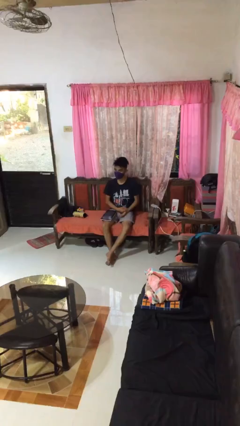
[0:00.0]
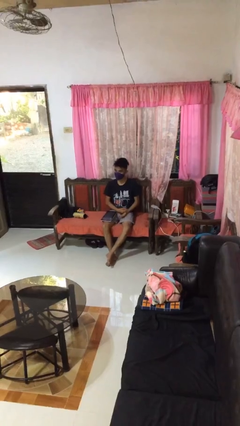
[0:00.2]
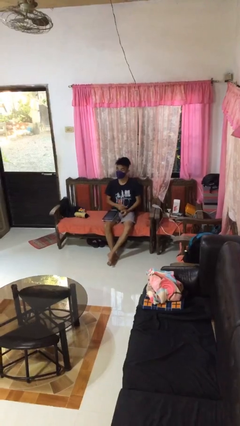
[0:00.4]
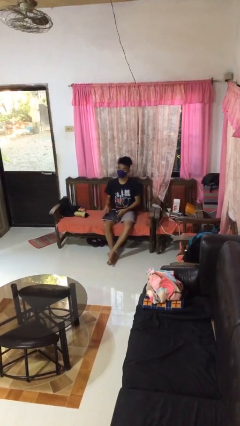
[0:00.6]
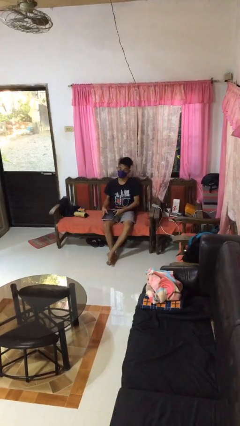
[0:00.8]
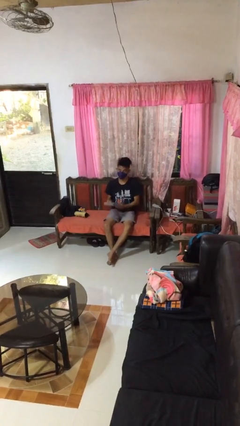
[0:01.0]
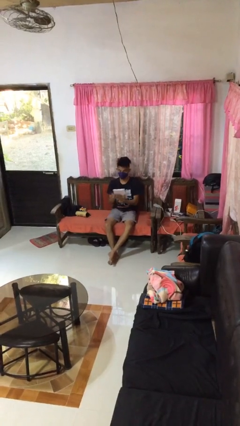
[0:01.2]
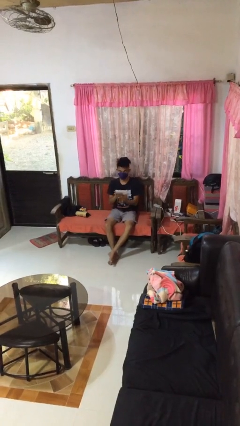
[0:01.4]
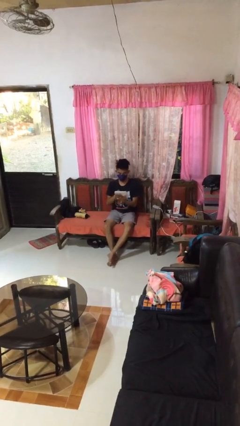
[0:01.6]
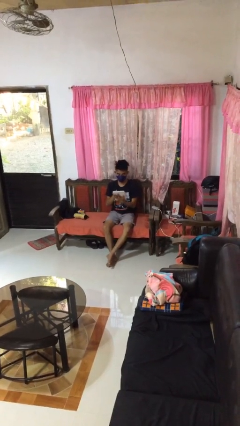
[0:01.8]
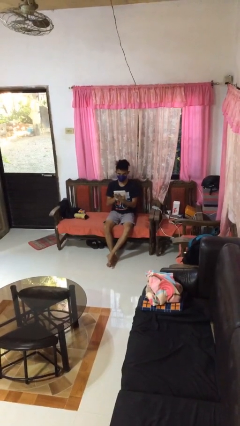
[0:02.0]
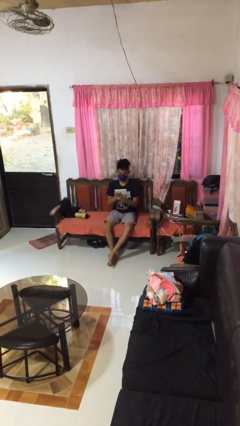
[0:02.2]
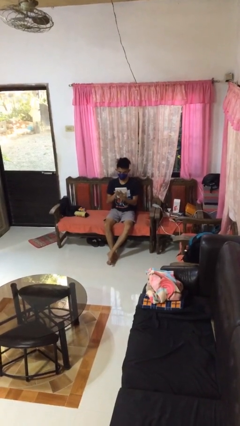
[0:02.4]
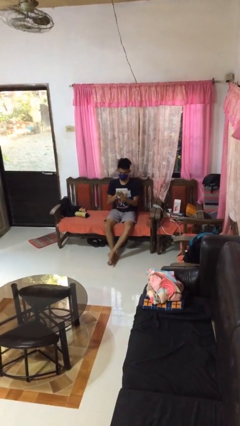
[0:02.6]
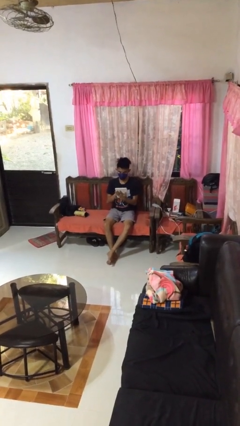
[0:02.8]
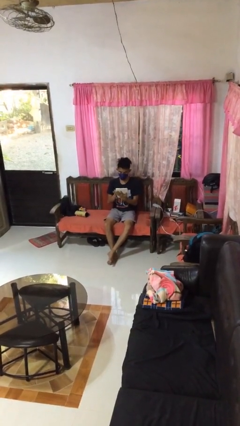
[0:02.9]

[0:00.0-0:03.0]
person interacts with tablet

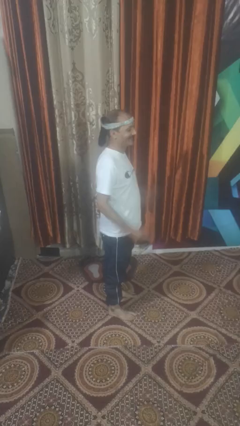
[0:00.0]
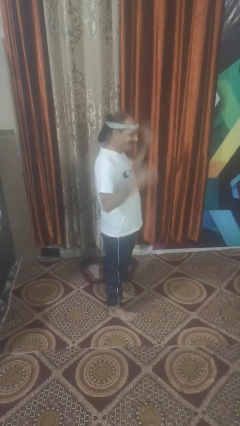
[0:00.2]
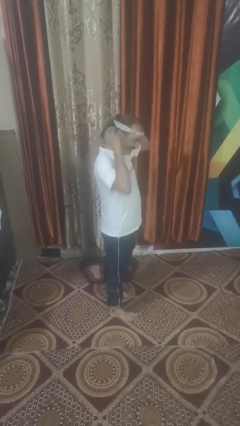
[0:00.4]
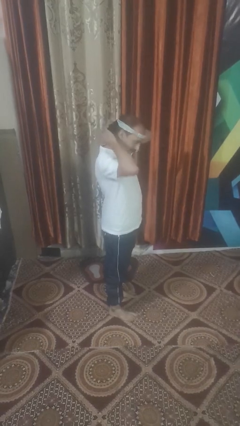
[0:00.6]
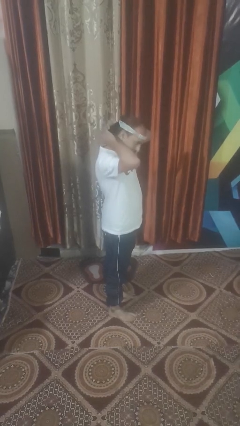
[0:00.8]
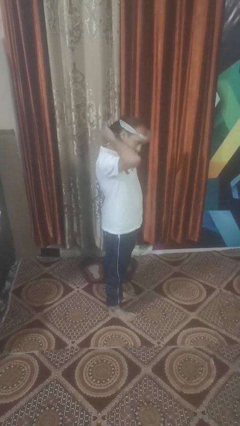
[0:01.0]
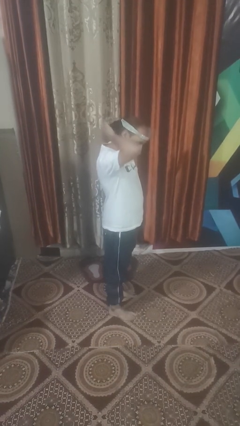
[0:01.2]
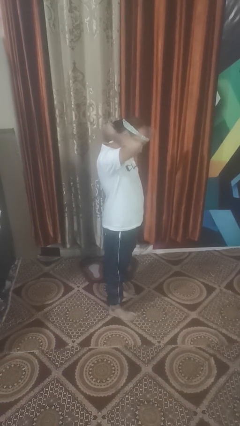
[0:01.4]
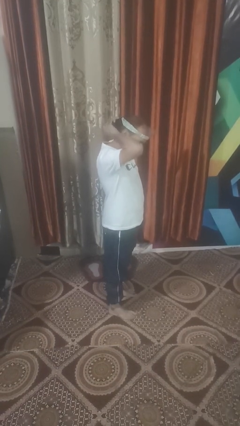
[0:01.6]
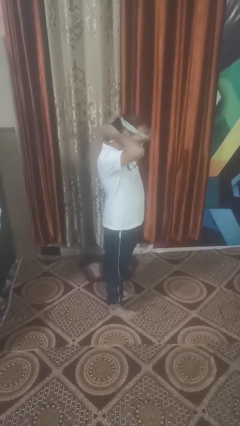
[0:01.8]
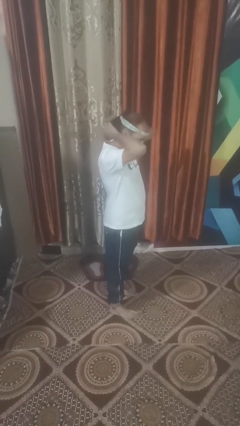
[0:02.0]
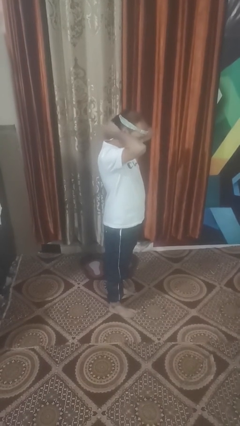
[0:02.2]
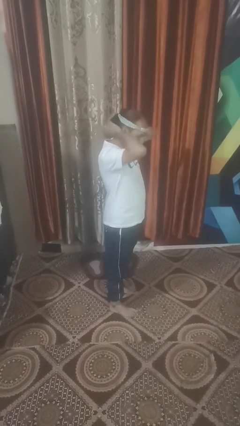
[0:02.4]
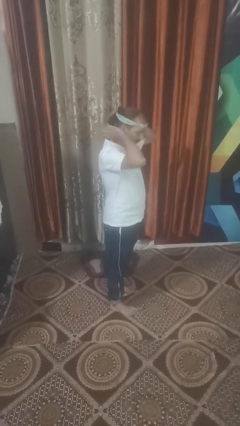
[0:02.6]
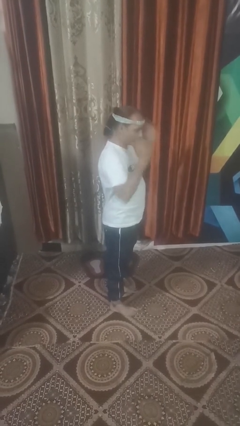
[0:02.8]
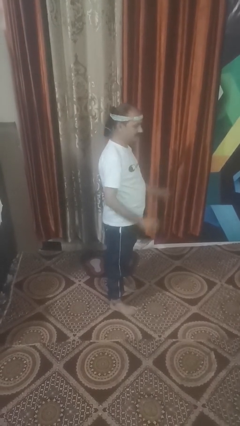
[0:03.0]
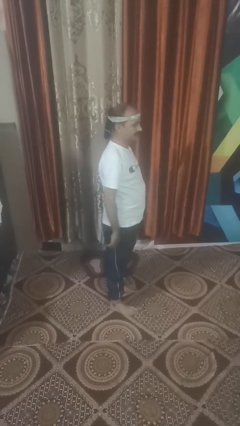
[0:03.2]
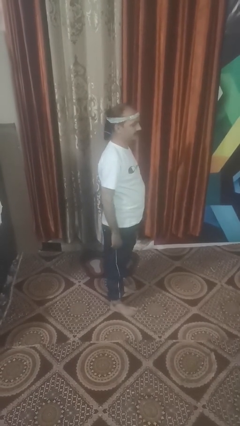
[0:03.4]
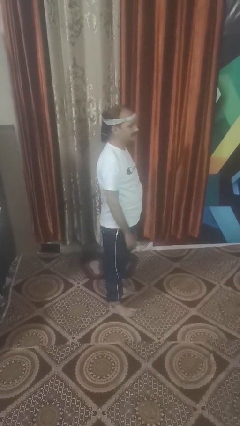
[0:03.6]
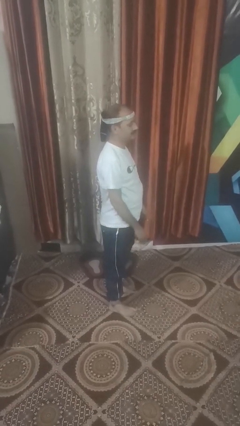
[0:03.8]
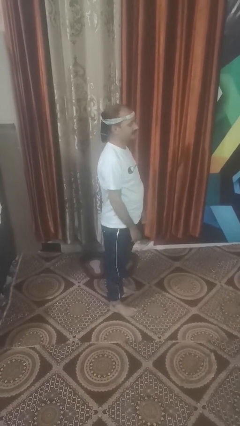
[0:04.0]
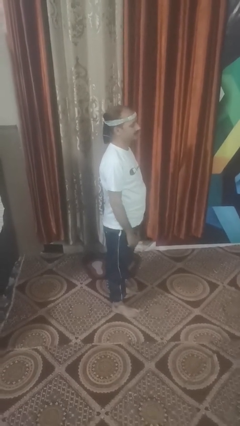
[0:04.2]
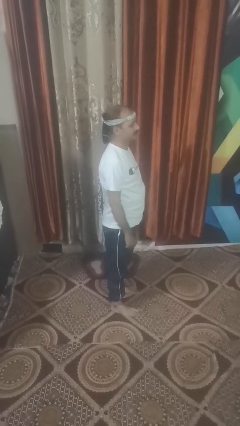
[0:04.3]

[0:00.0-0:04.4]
person puts hair in ponytail

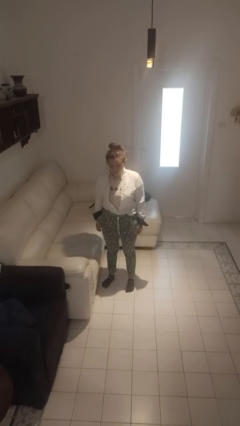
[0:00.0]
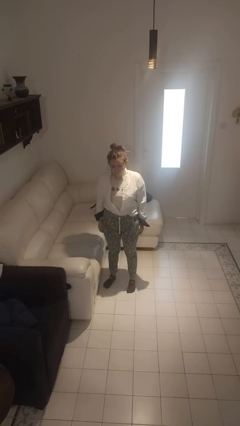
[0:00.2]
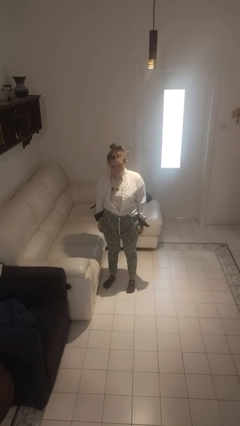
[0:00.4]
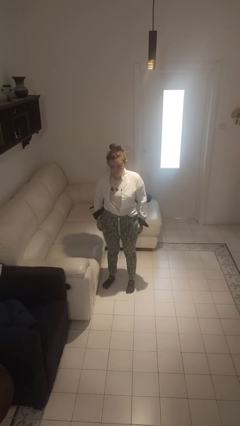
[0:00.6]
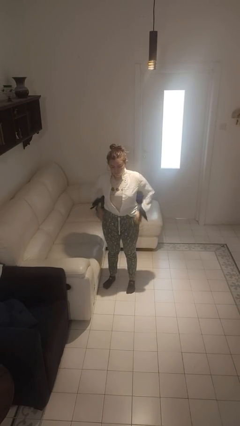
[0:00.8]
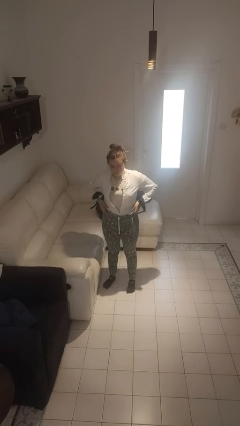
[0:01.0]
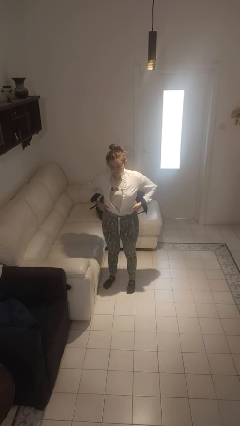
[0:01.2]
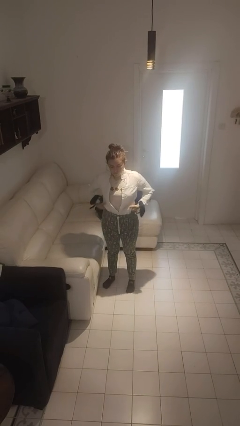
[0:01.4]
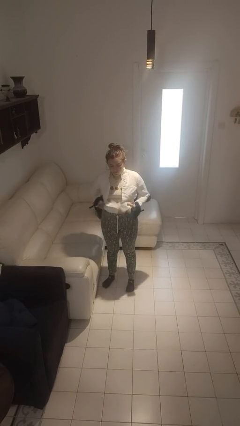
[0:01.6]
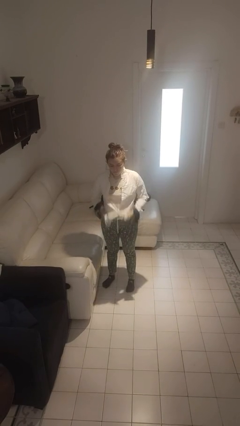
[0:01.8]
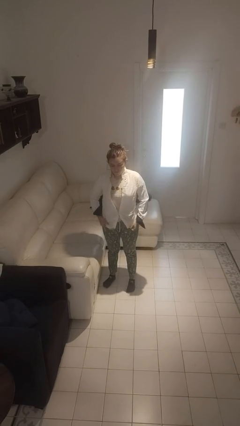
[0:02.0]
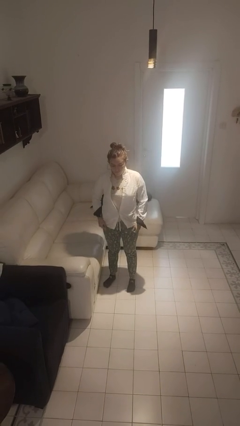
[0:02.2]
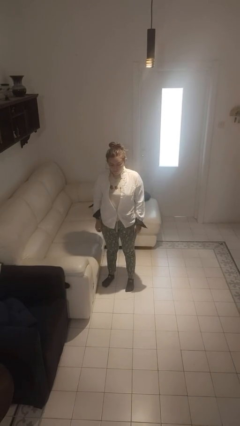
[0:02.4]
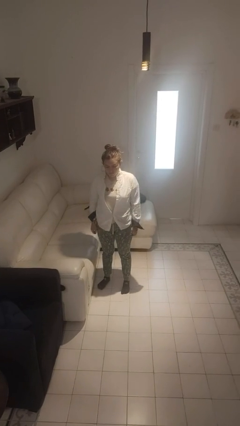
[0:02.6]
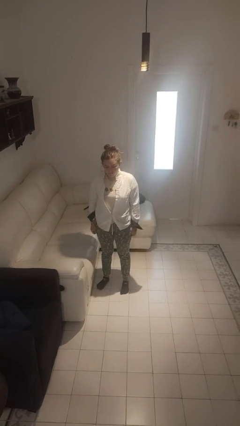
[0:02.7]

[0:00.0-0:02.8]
person untucks shirt

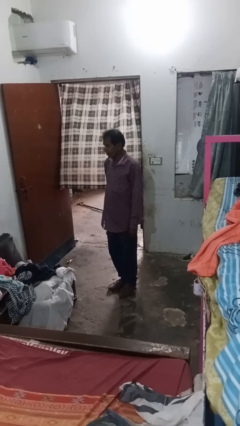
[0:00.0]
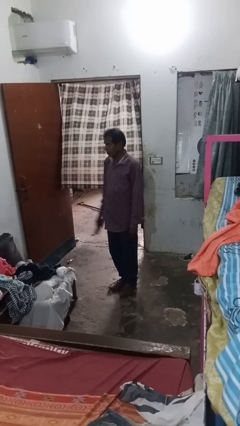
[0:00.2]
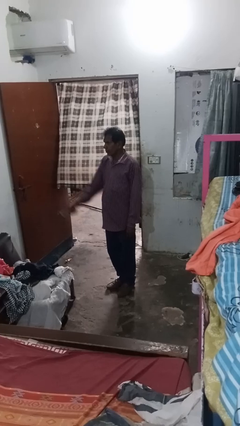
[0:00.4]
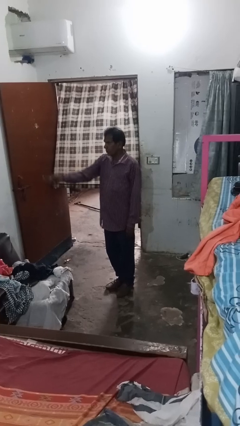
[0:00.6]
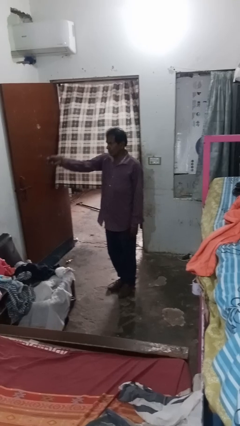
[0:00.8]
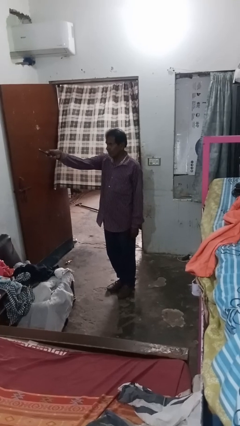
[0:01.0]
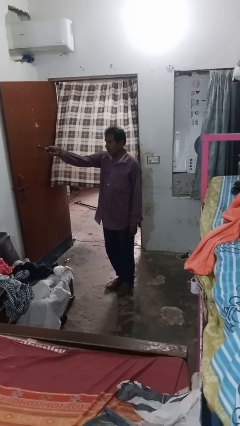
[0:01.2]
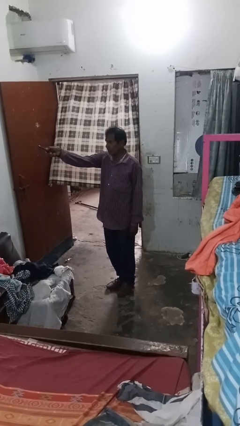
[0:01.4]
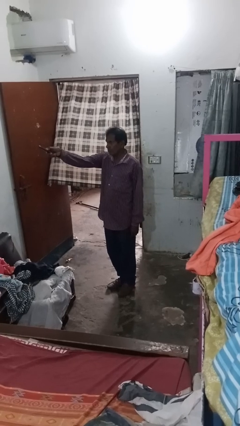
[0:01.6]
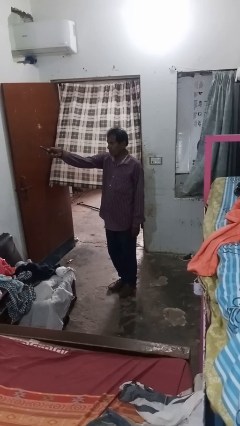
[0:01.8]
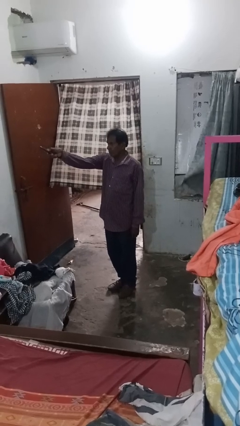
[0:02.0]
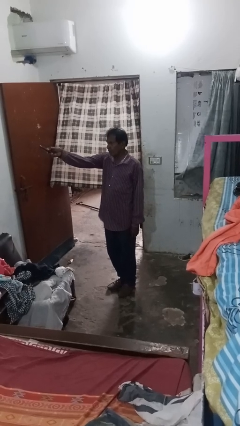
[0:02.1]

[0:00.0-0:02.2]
person uses television remote

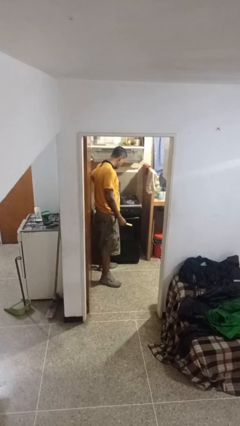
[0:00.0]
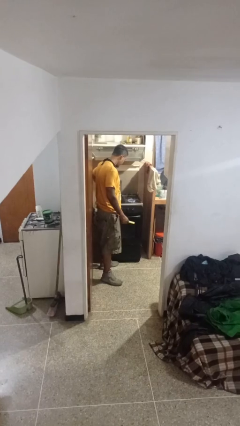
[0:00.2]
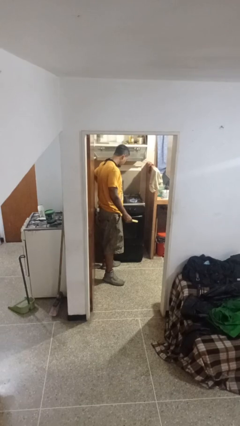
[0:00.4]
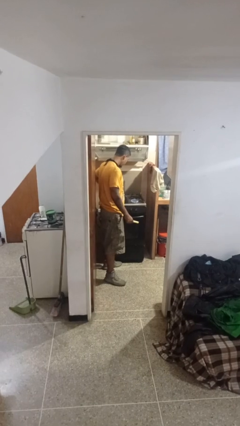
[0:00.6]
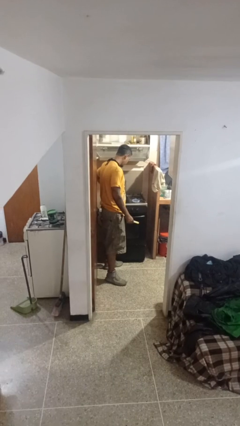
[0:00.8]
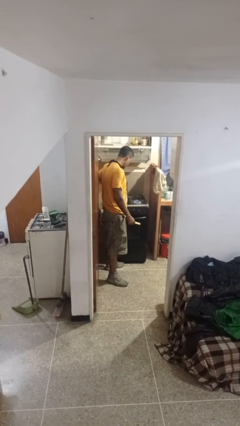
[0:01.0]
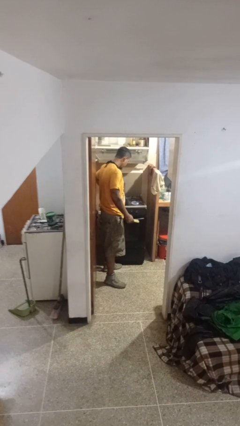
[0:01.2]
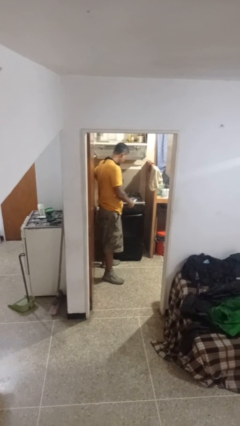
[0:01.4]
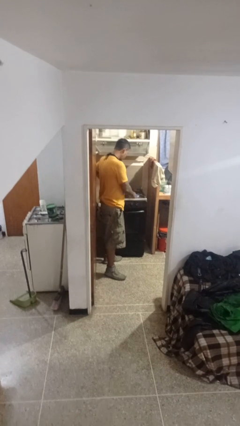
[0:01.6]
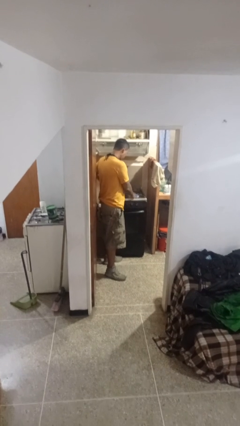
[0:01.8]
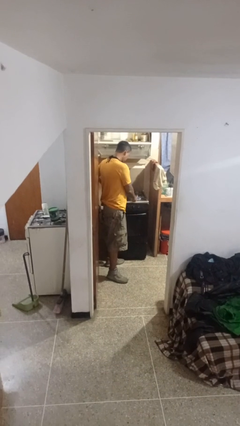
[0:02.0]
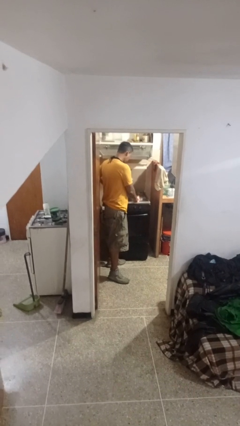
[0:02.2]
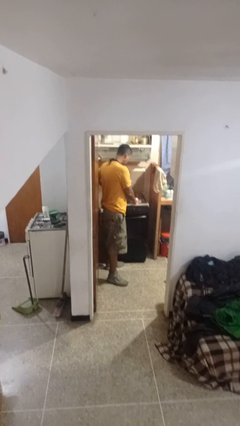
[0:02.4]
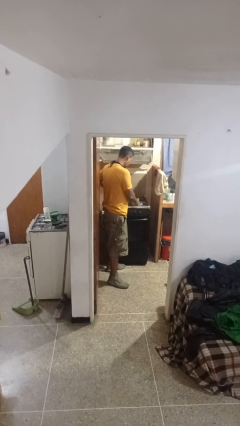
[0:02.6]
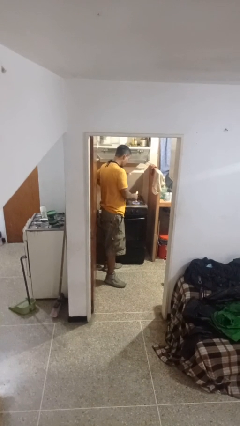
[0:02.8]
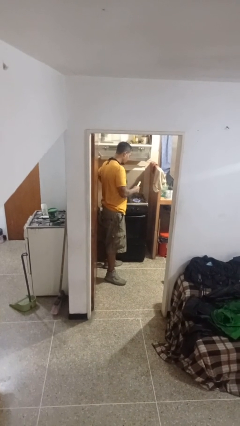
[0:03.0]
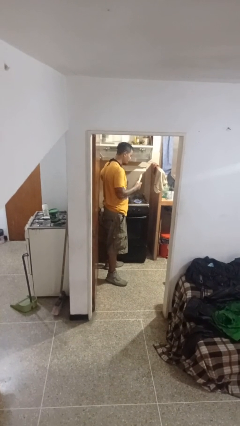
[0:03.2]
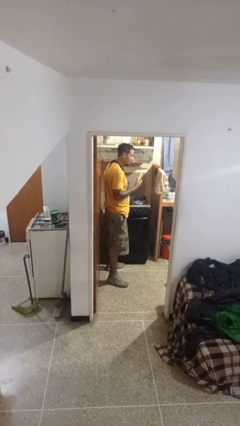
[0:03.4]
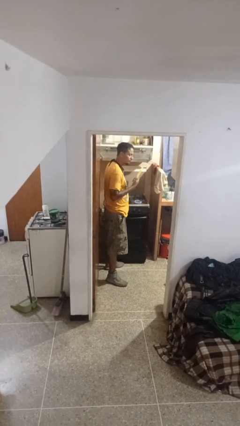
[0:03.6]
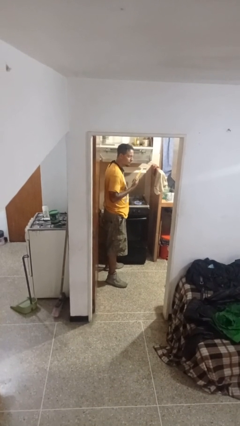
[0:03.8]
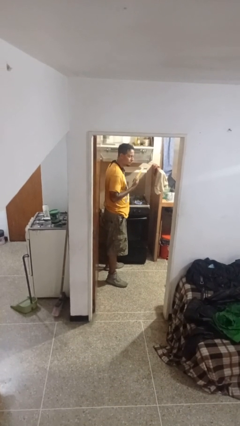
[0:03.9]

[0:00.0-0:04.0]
person lights candle

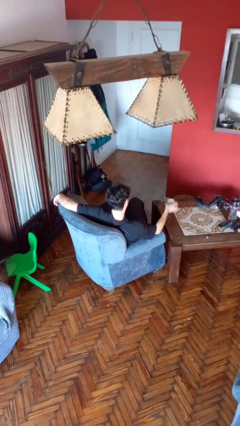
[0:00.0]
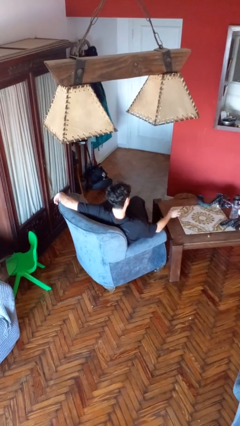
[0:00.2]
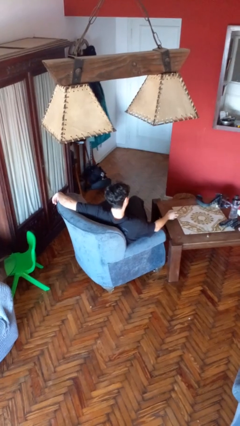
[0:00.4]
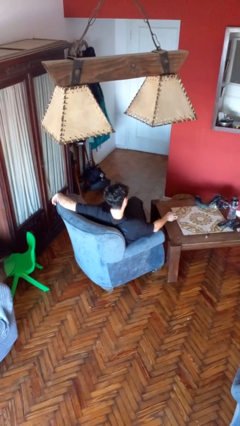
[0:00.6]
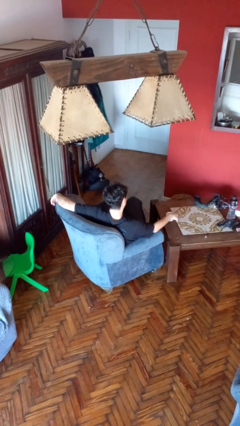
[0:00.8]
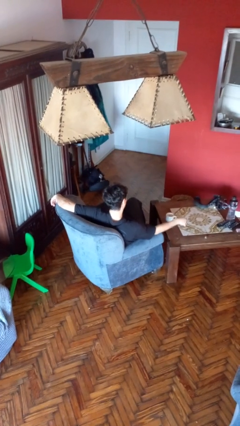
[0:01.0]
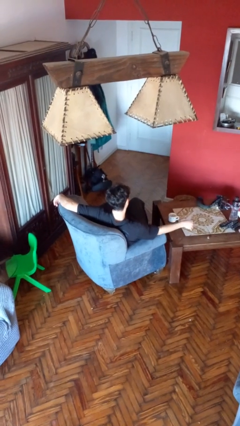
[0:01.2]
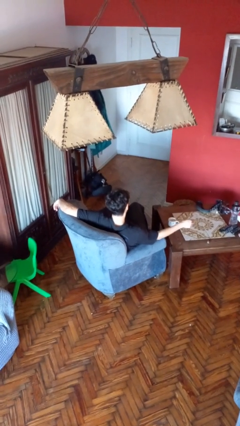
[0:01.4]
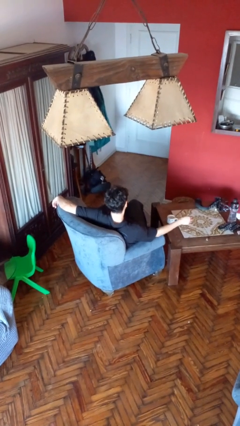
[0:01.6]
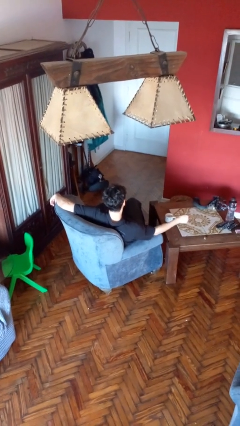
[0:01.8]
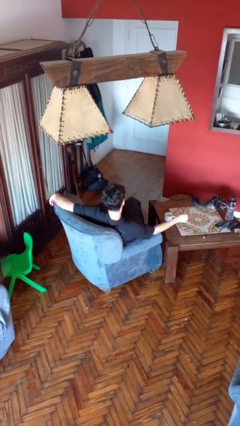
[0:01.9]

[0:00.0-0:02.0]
person puts down object on table
